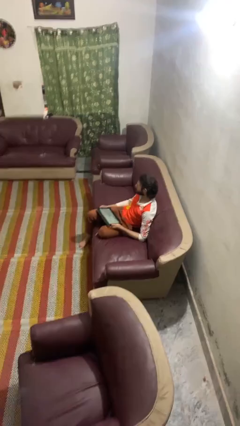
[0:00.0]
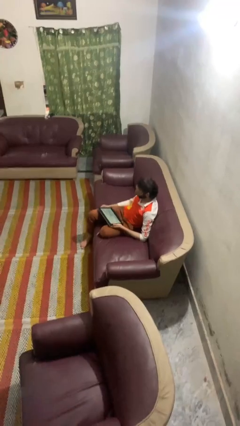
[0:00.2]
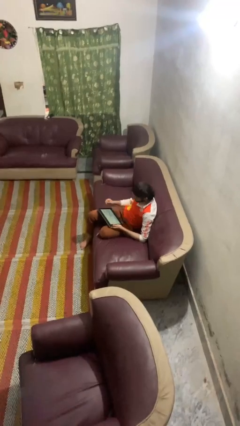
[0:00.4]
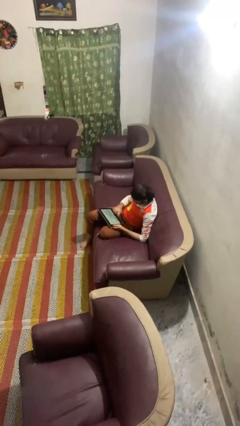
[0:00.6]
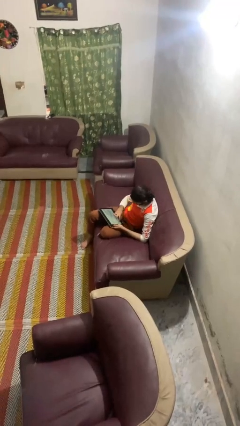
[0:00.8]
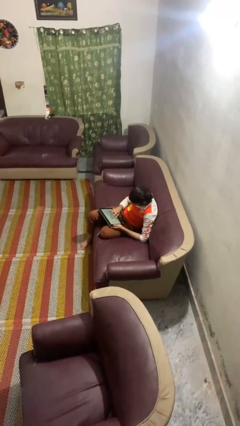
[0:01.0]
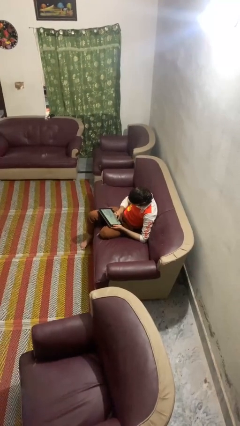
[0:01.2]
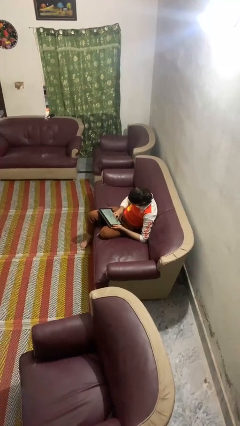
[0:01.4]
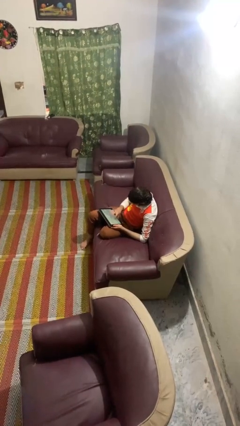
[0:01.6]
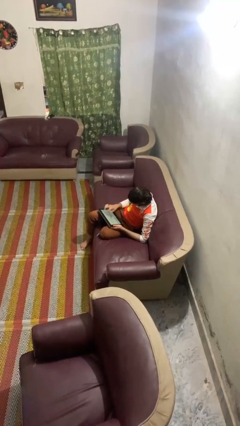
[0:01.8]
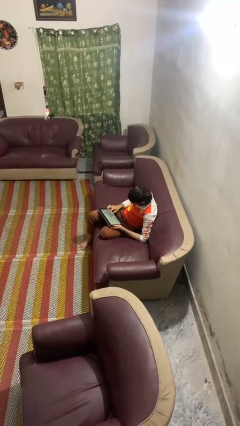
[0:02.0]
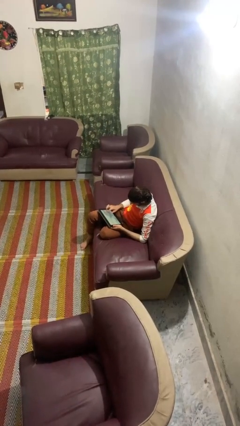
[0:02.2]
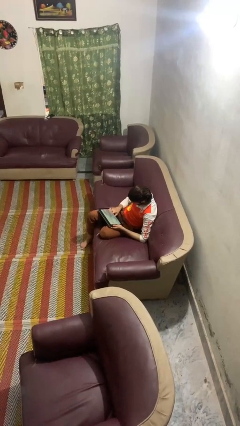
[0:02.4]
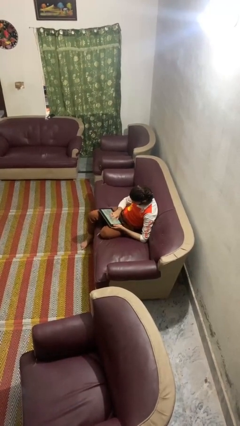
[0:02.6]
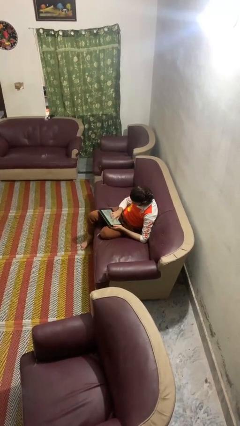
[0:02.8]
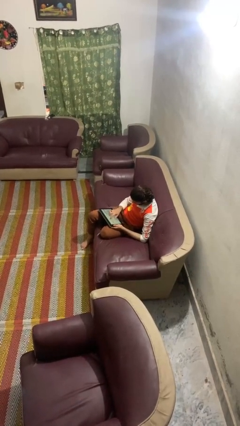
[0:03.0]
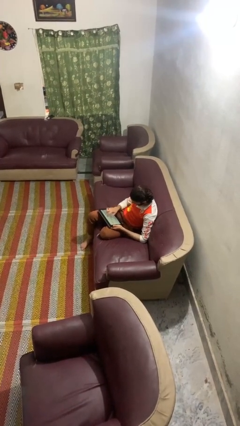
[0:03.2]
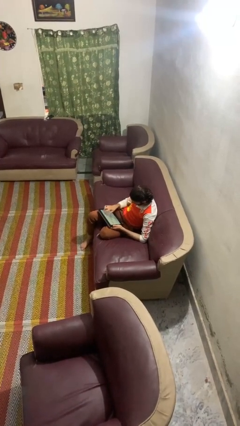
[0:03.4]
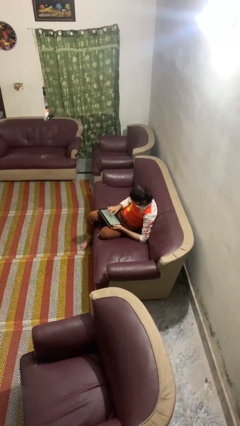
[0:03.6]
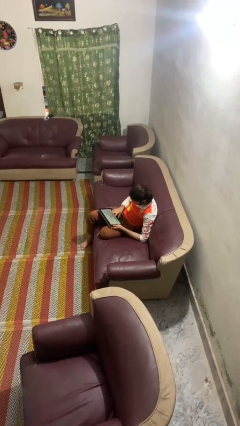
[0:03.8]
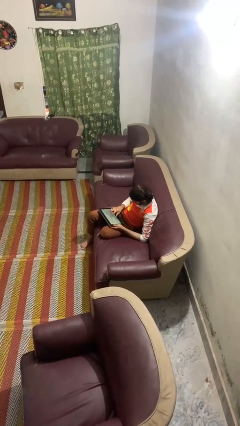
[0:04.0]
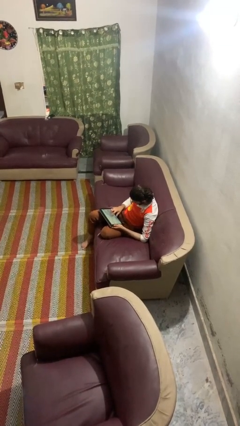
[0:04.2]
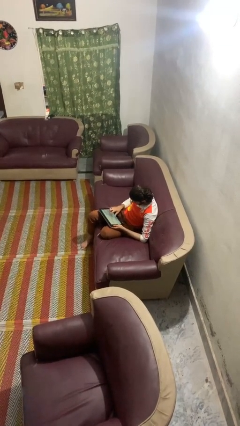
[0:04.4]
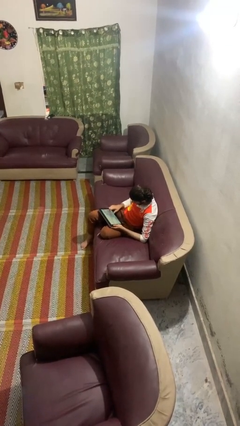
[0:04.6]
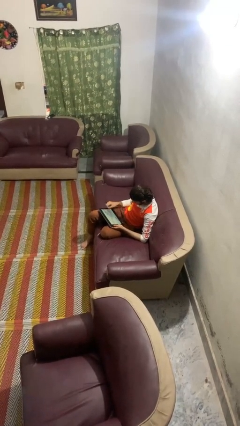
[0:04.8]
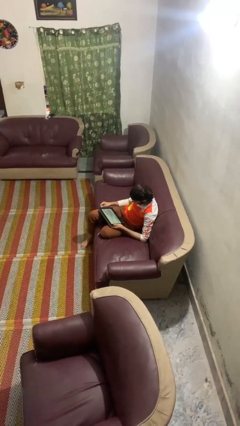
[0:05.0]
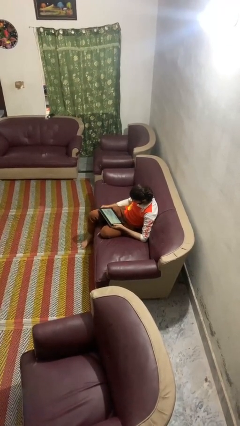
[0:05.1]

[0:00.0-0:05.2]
person interacts with tablet

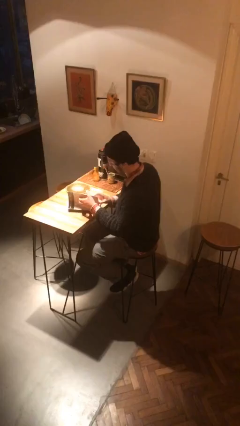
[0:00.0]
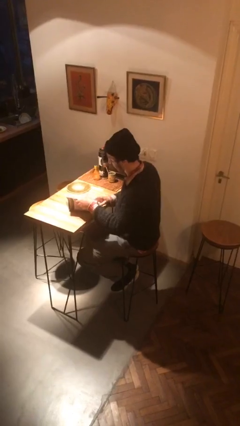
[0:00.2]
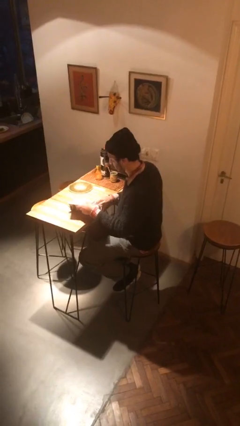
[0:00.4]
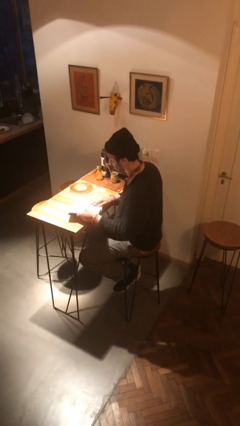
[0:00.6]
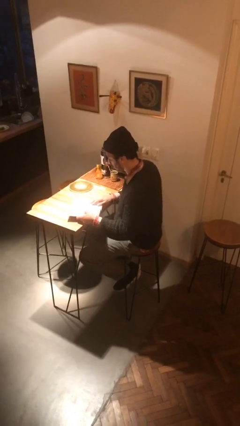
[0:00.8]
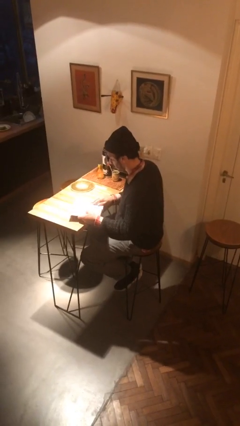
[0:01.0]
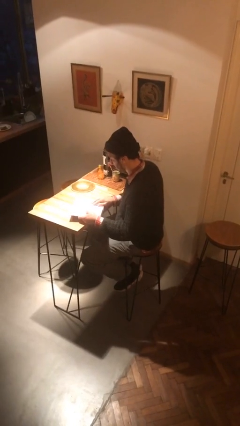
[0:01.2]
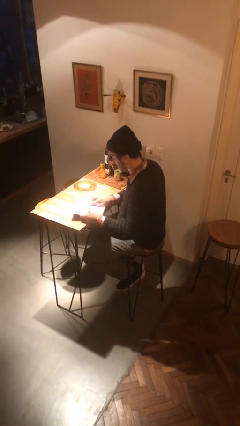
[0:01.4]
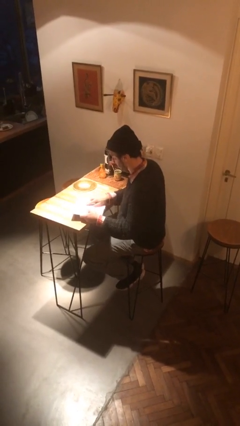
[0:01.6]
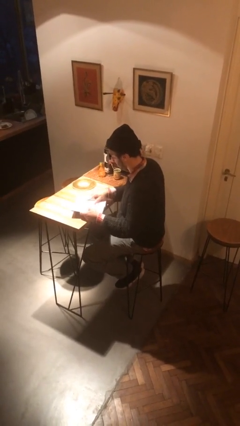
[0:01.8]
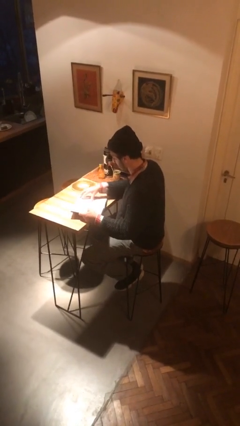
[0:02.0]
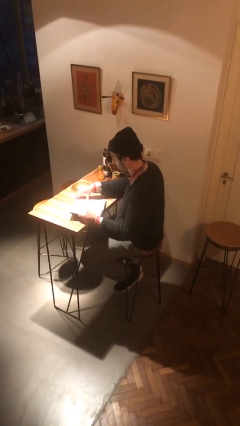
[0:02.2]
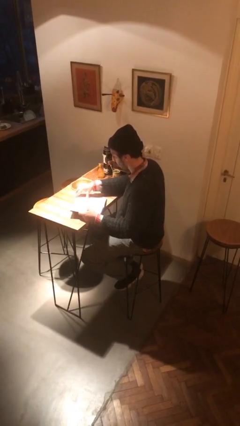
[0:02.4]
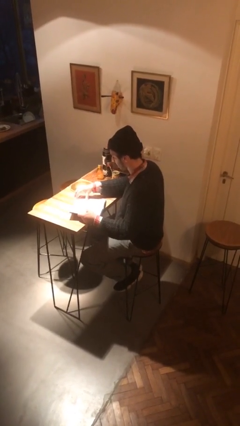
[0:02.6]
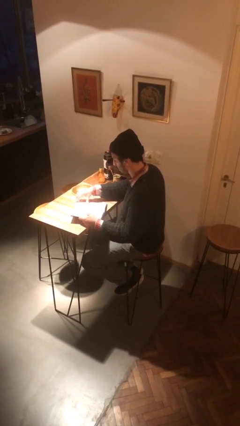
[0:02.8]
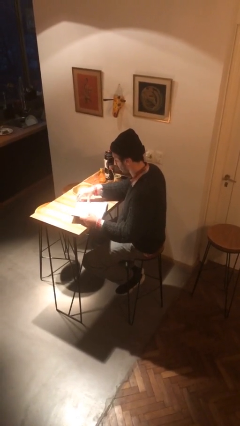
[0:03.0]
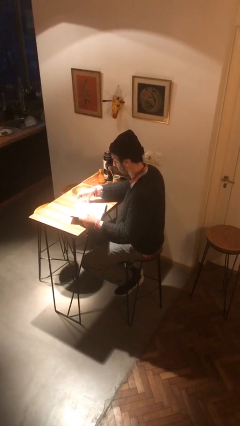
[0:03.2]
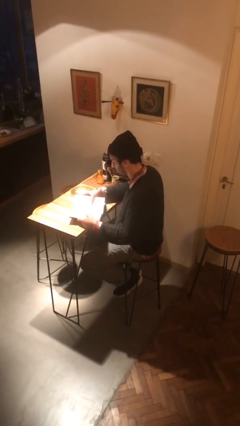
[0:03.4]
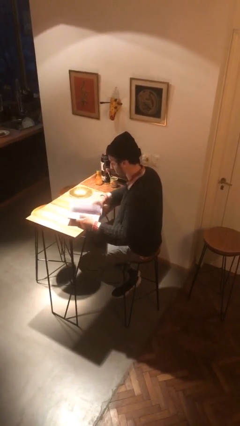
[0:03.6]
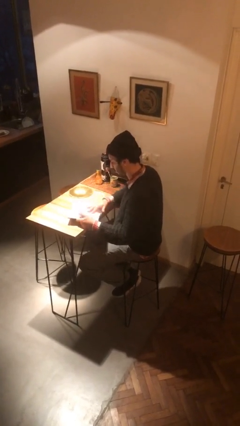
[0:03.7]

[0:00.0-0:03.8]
person reads book

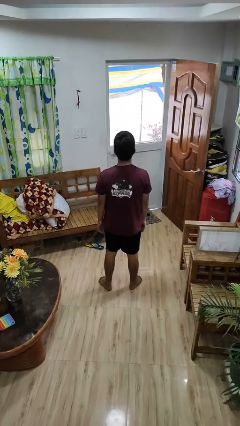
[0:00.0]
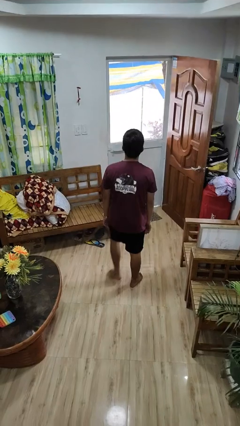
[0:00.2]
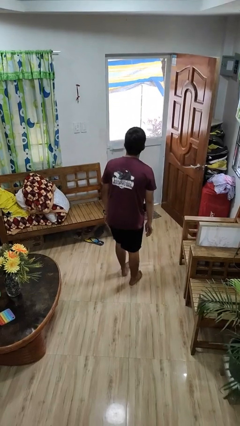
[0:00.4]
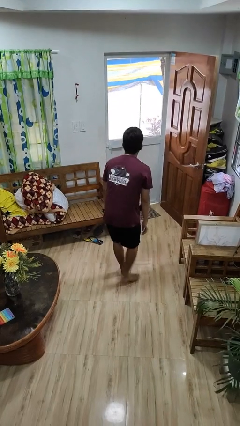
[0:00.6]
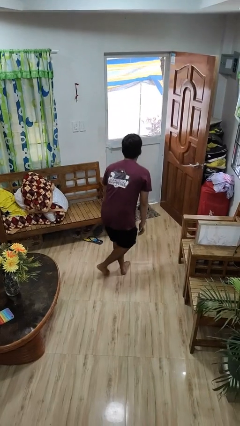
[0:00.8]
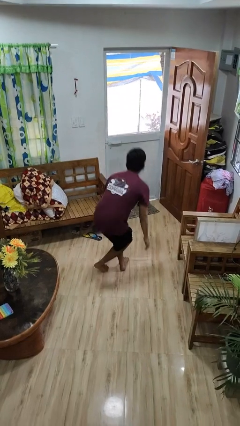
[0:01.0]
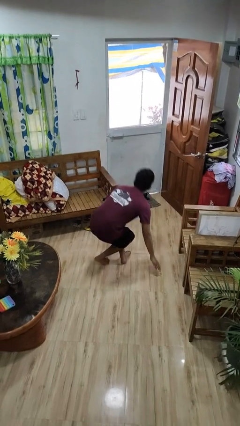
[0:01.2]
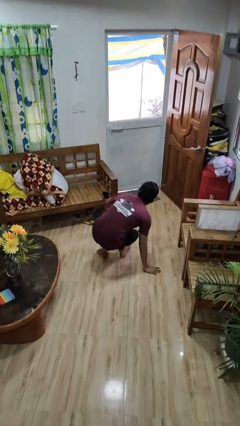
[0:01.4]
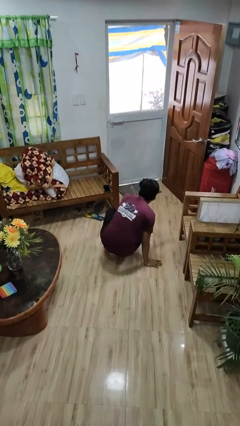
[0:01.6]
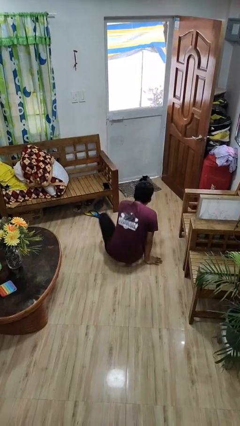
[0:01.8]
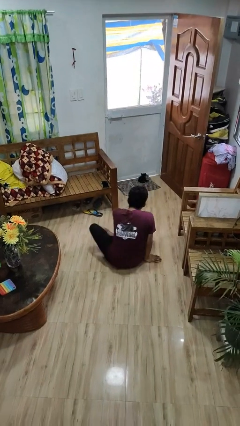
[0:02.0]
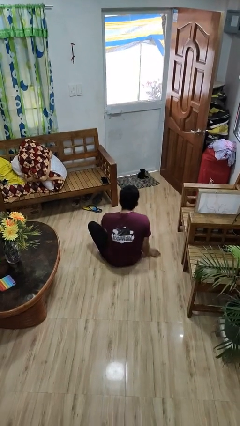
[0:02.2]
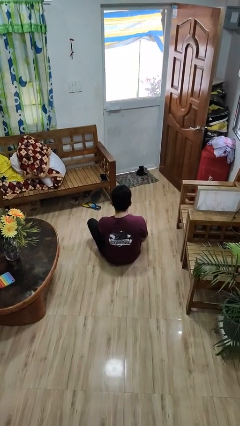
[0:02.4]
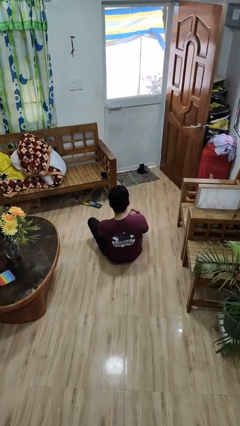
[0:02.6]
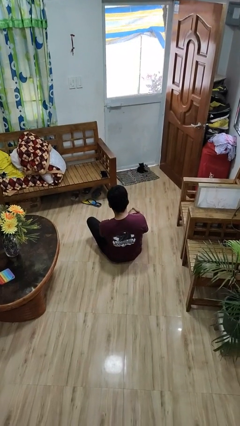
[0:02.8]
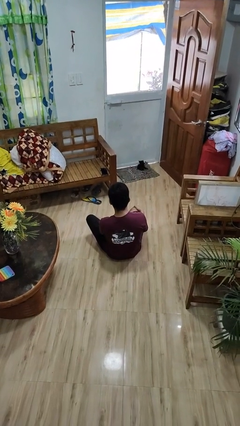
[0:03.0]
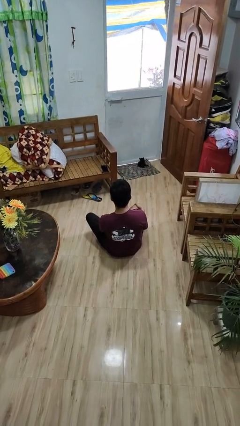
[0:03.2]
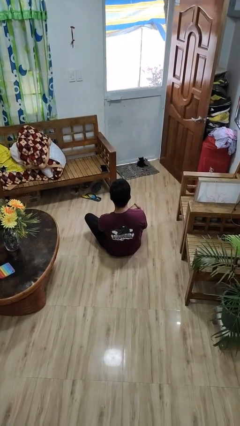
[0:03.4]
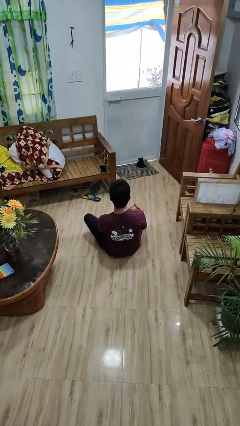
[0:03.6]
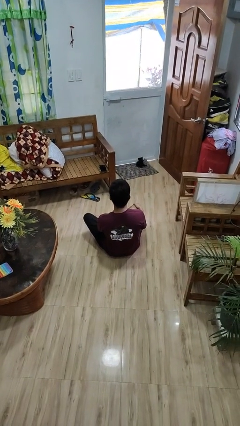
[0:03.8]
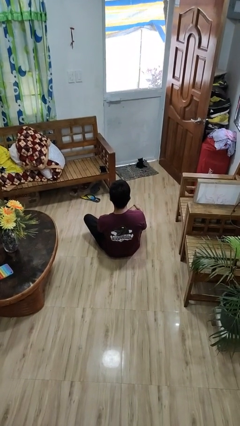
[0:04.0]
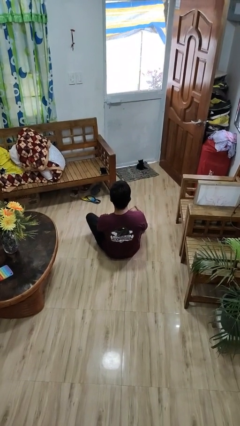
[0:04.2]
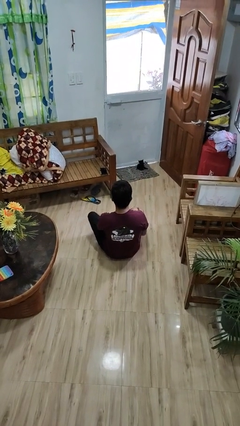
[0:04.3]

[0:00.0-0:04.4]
person sits crisscross

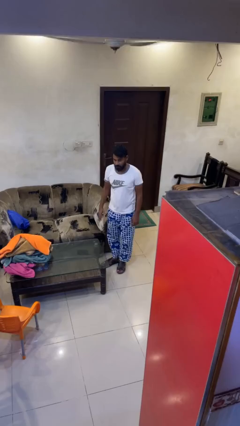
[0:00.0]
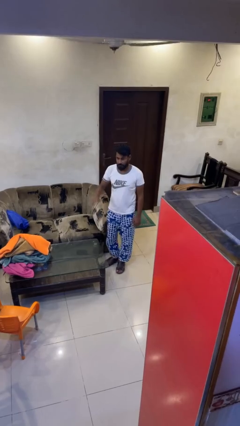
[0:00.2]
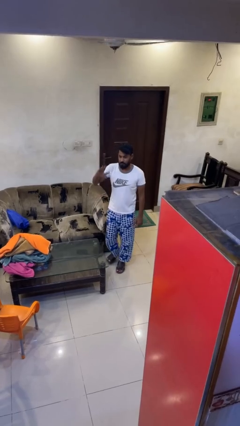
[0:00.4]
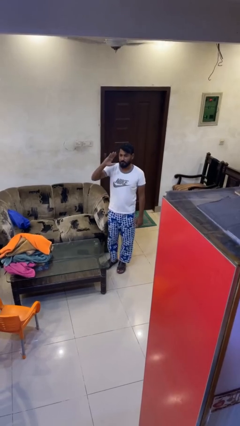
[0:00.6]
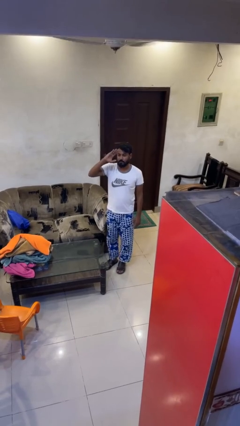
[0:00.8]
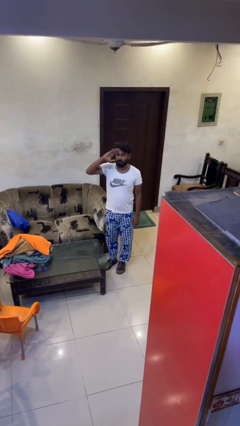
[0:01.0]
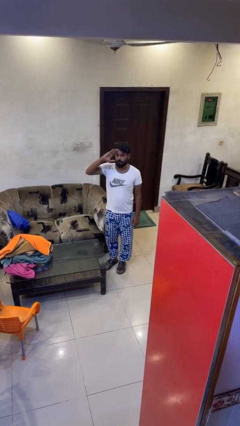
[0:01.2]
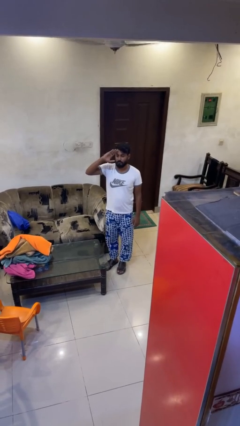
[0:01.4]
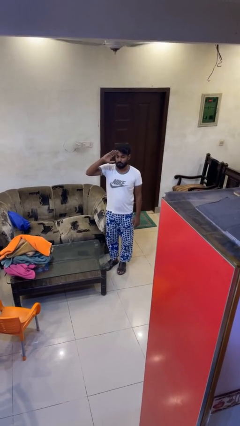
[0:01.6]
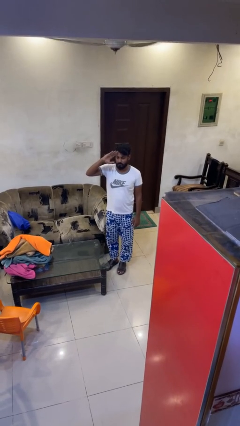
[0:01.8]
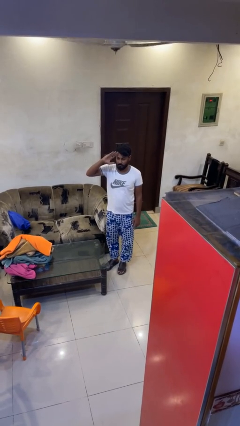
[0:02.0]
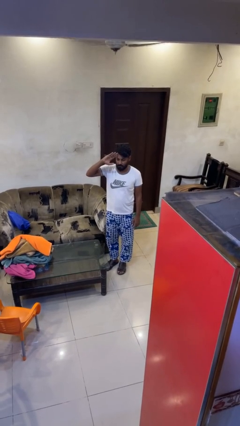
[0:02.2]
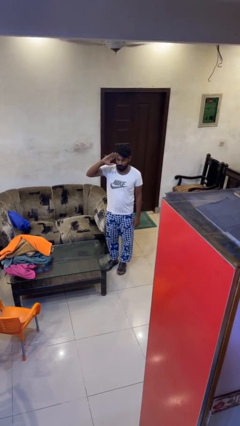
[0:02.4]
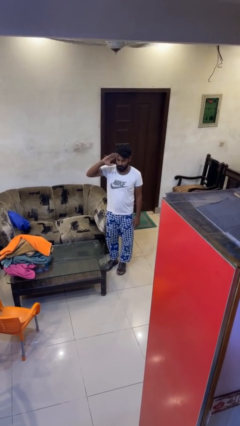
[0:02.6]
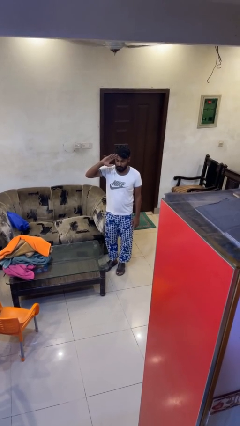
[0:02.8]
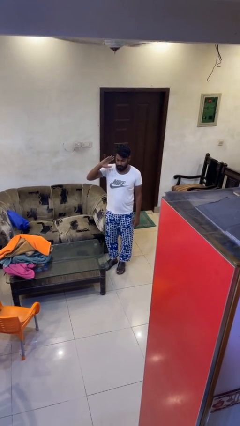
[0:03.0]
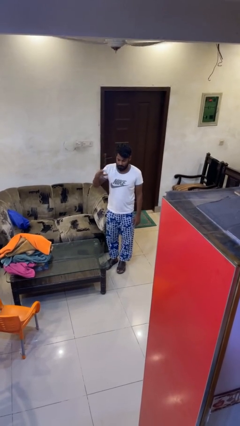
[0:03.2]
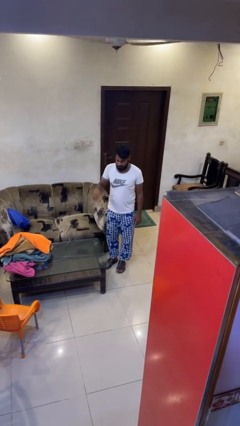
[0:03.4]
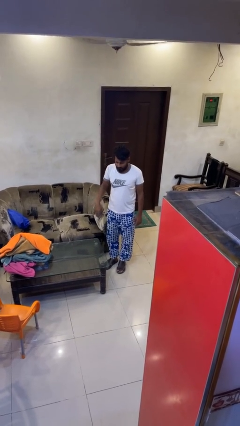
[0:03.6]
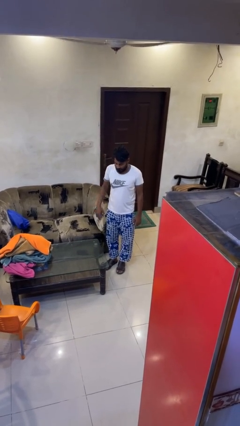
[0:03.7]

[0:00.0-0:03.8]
person salutes

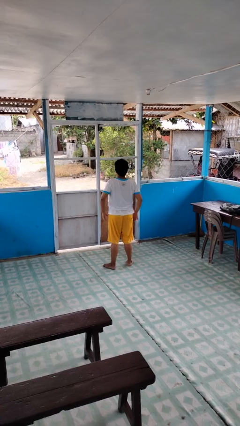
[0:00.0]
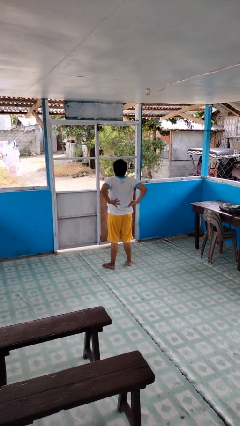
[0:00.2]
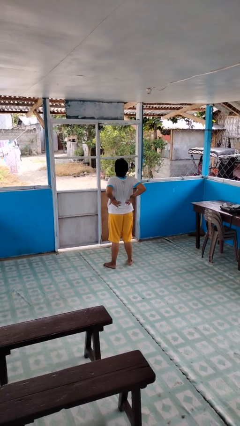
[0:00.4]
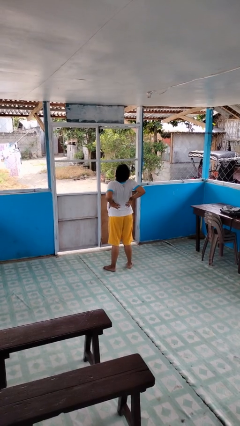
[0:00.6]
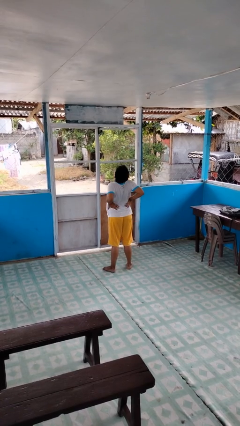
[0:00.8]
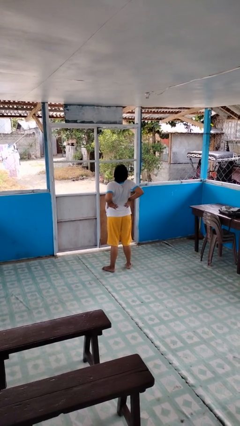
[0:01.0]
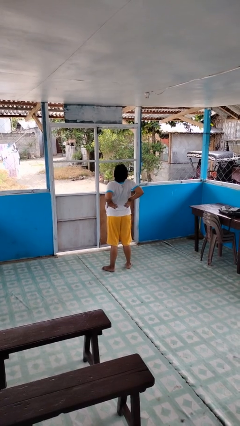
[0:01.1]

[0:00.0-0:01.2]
person stretches back
